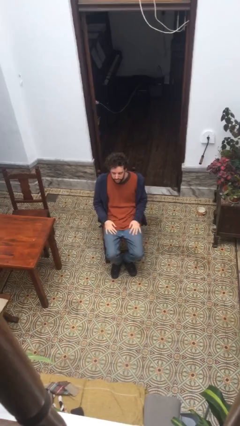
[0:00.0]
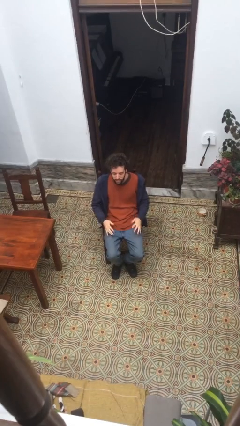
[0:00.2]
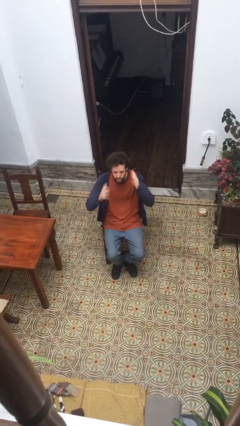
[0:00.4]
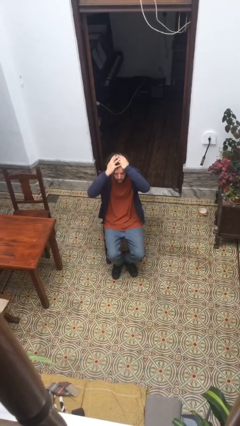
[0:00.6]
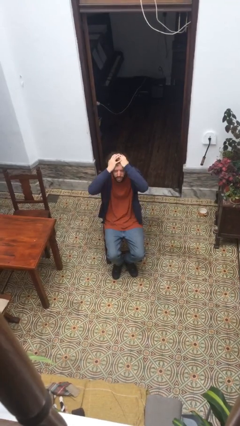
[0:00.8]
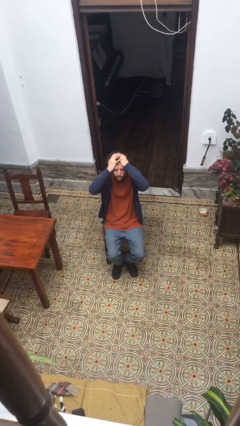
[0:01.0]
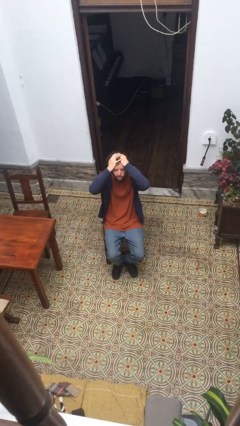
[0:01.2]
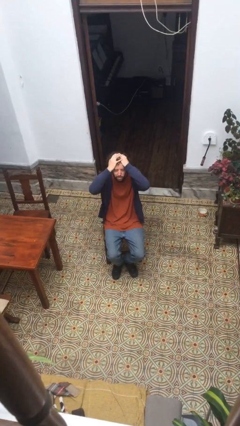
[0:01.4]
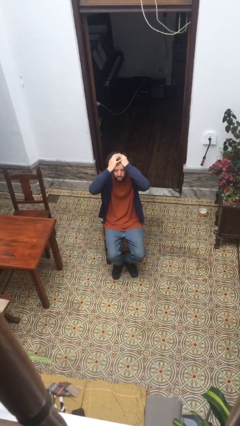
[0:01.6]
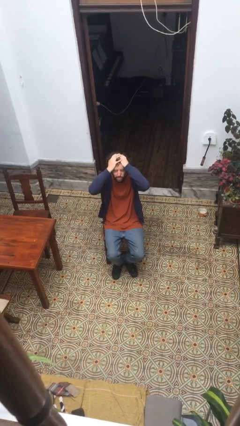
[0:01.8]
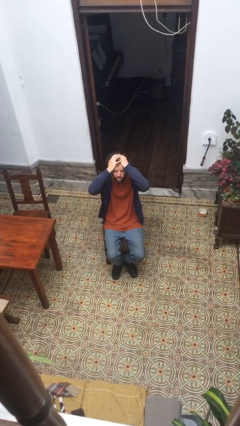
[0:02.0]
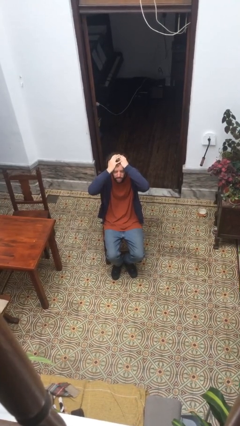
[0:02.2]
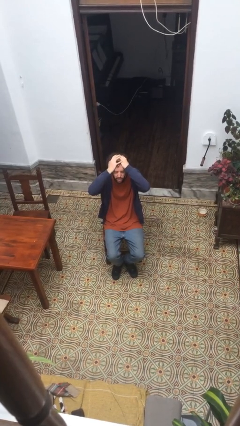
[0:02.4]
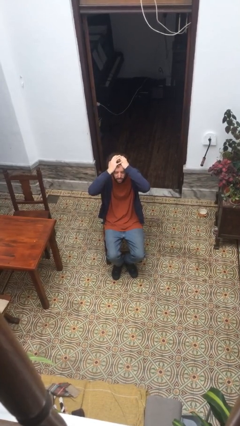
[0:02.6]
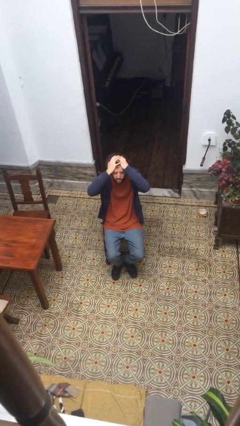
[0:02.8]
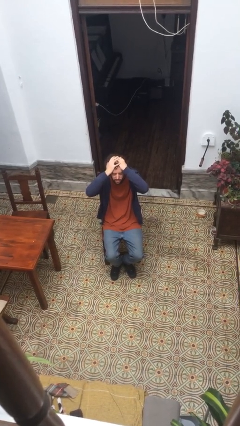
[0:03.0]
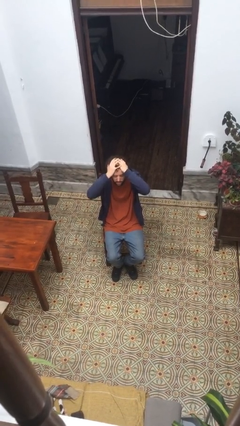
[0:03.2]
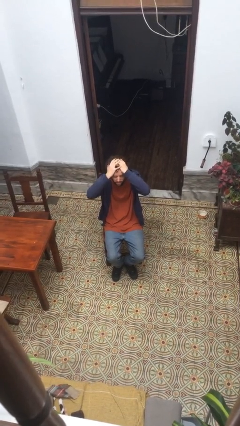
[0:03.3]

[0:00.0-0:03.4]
person covers face with hands

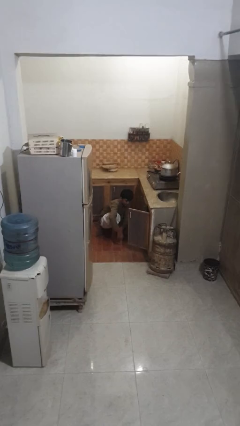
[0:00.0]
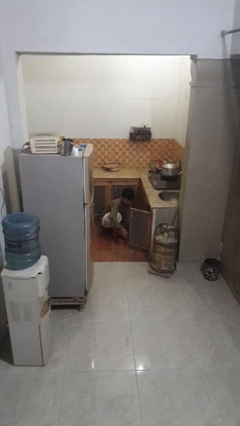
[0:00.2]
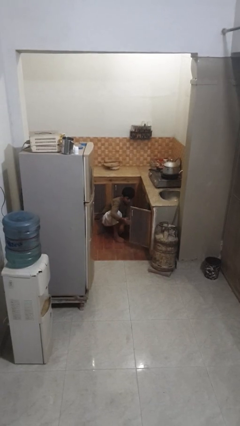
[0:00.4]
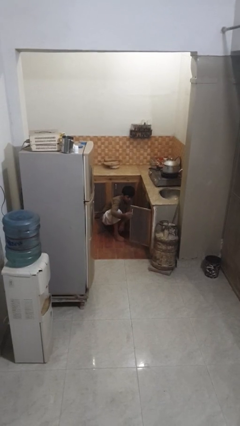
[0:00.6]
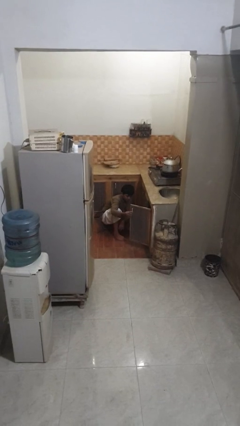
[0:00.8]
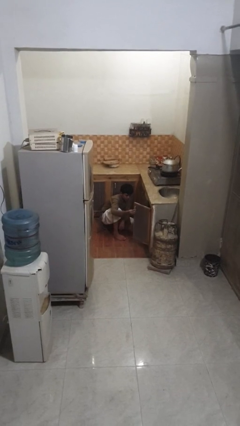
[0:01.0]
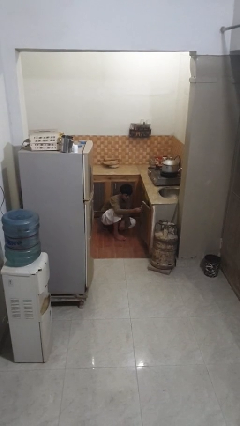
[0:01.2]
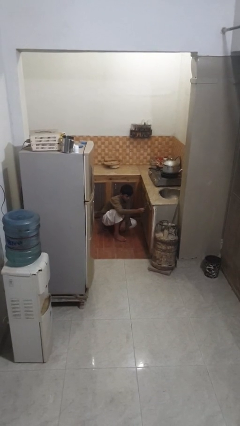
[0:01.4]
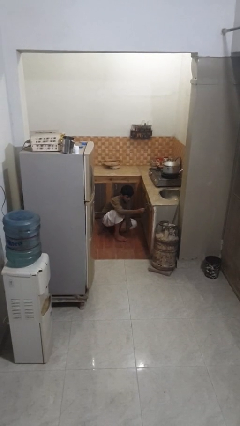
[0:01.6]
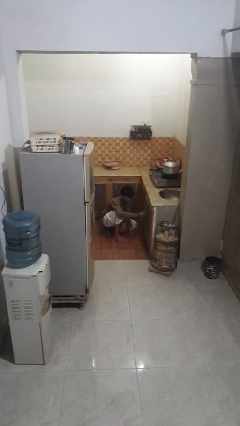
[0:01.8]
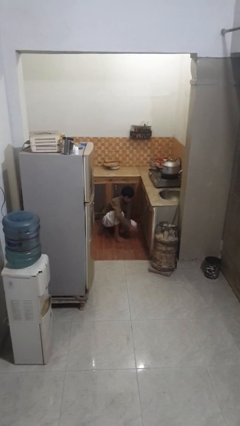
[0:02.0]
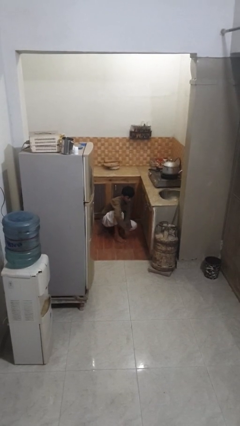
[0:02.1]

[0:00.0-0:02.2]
person closes kitchen drawer

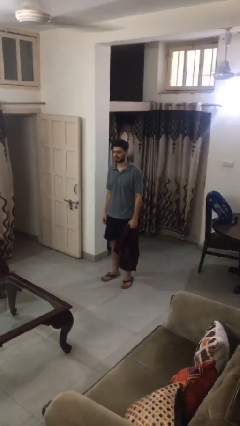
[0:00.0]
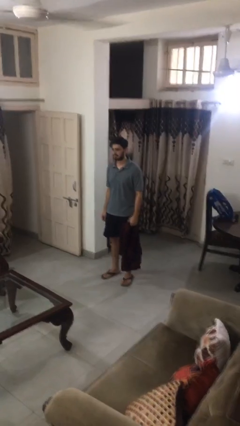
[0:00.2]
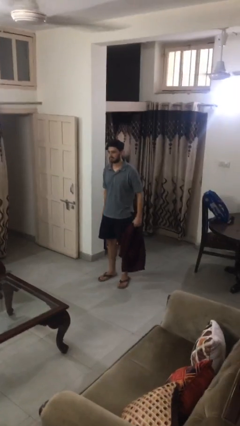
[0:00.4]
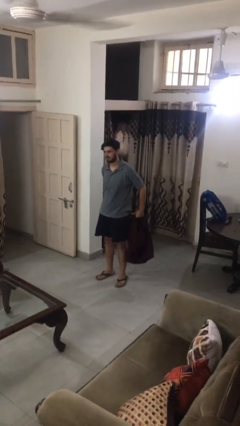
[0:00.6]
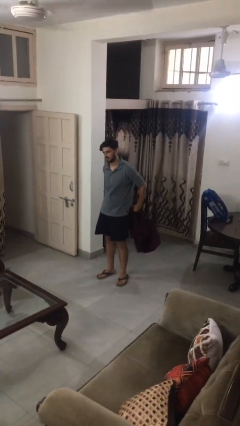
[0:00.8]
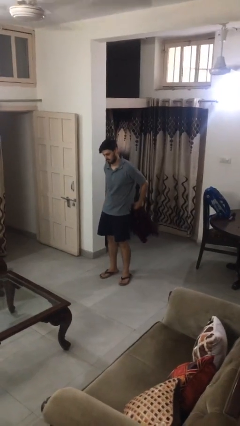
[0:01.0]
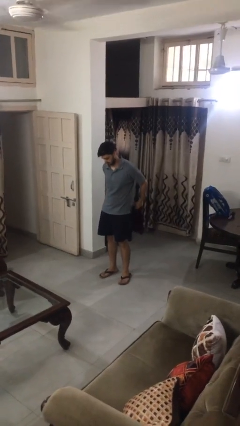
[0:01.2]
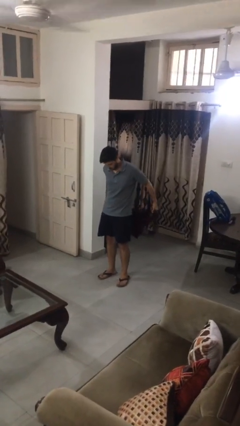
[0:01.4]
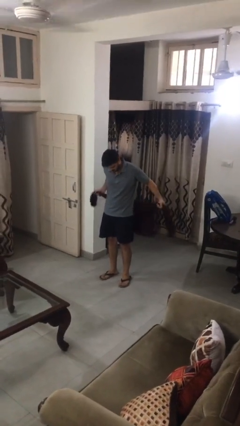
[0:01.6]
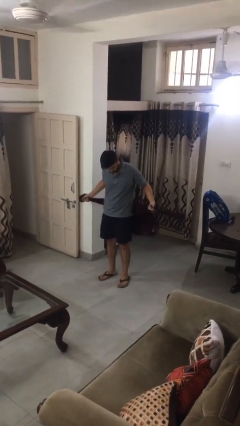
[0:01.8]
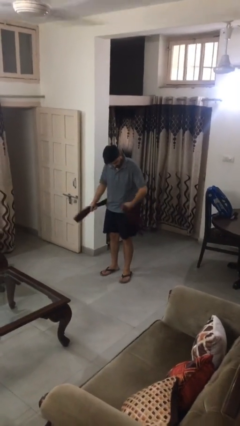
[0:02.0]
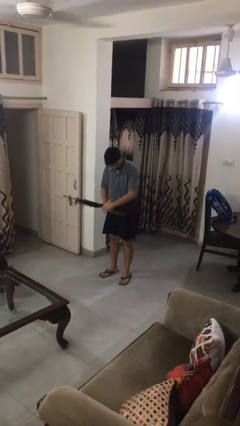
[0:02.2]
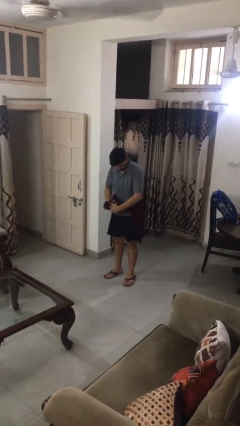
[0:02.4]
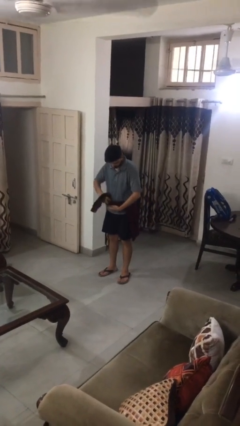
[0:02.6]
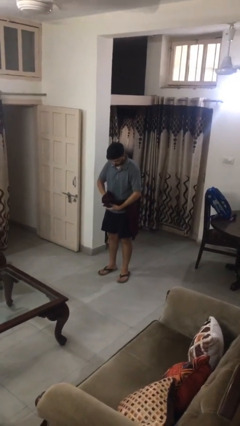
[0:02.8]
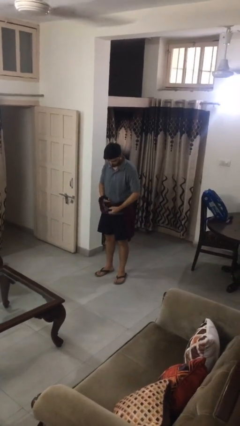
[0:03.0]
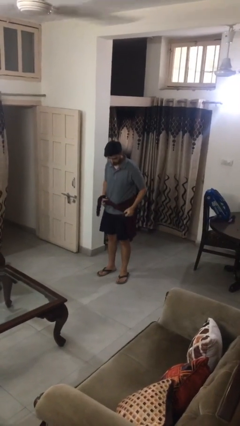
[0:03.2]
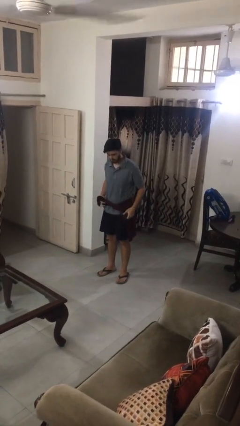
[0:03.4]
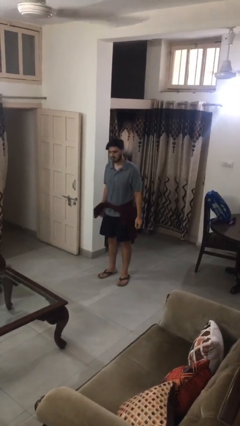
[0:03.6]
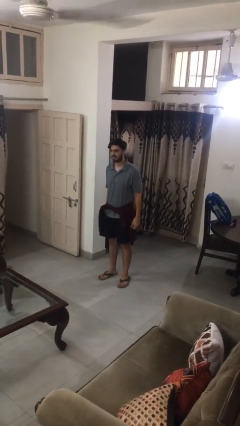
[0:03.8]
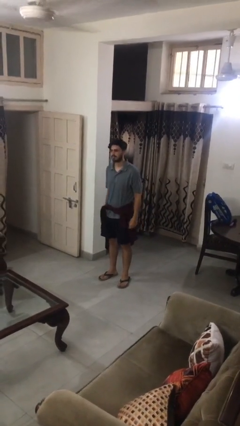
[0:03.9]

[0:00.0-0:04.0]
person ties jacket around waist

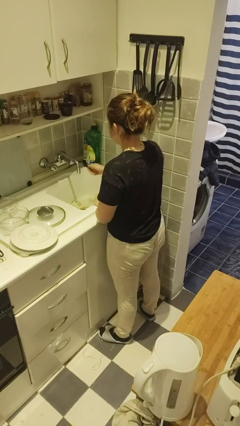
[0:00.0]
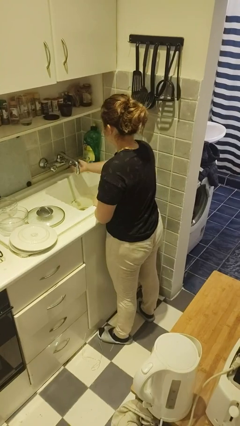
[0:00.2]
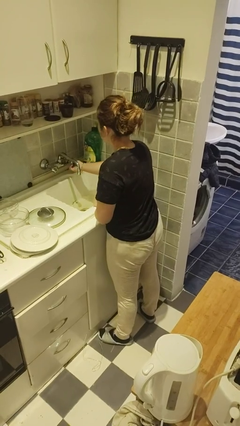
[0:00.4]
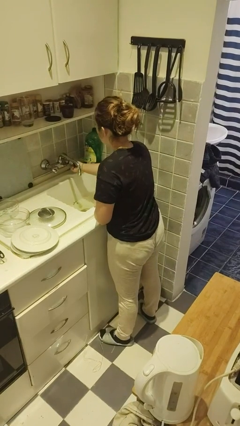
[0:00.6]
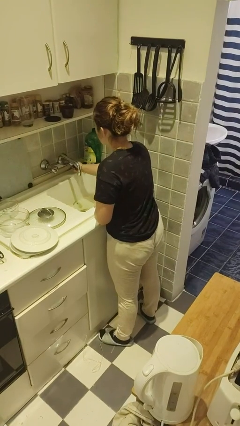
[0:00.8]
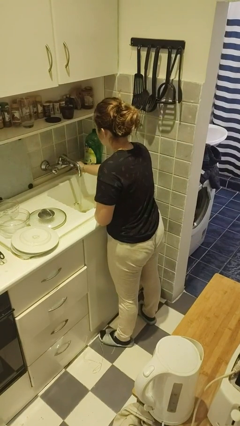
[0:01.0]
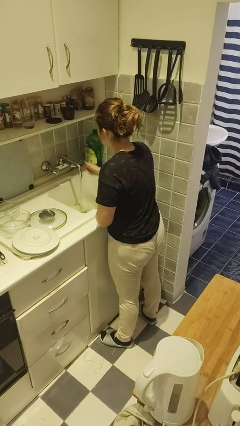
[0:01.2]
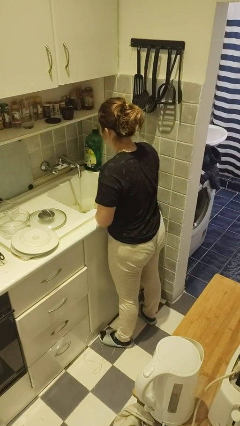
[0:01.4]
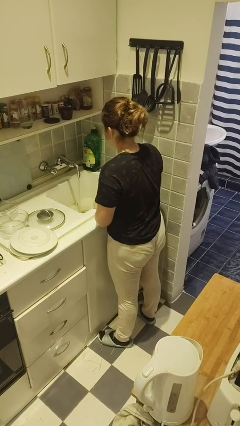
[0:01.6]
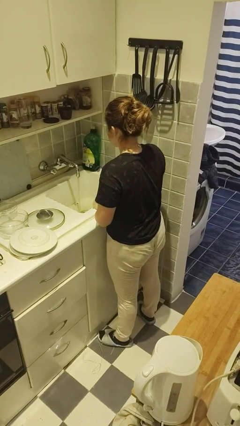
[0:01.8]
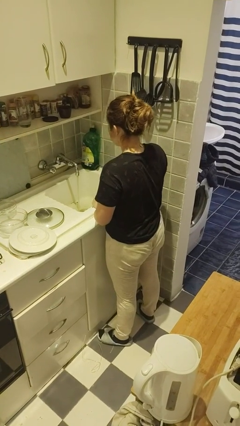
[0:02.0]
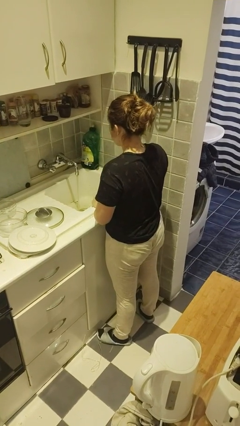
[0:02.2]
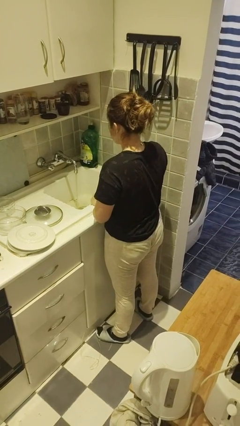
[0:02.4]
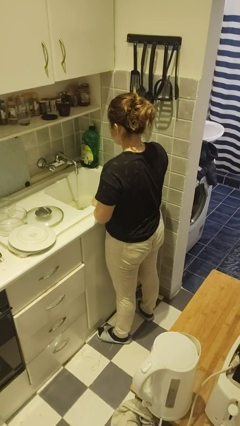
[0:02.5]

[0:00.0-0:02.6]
person turns on faucet

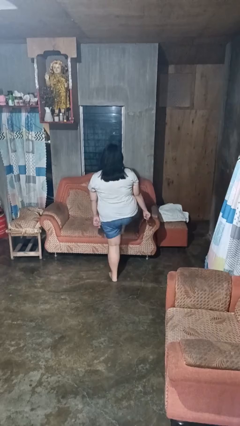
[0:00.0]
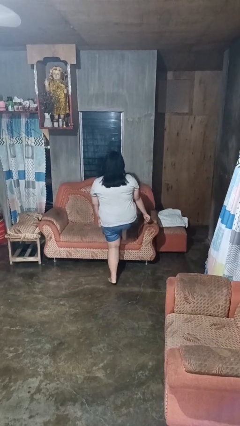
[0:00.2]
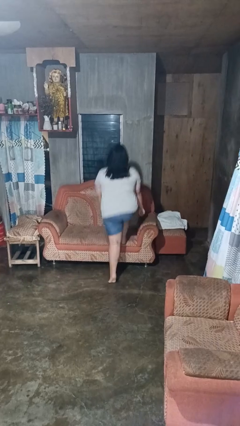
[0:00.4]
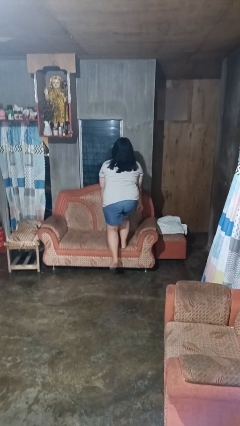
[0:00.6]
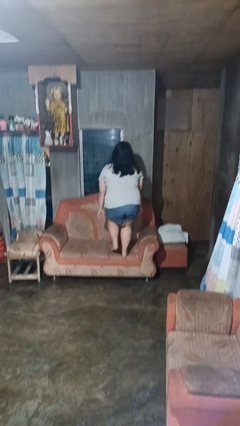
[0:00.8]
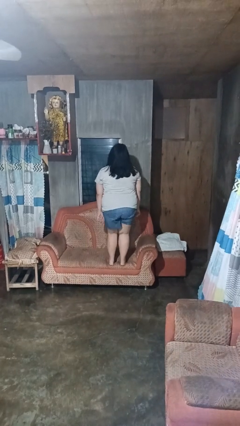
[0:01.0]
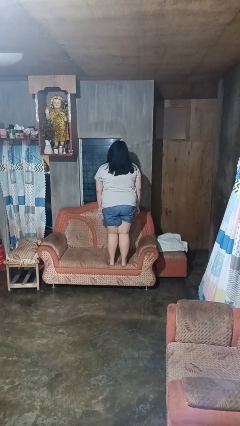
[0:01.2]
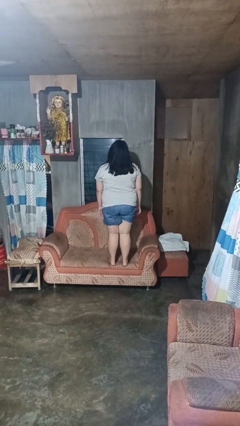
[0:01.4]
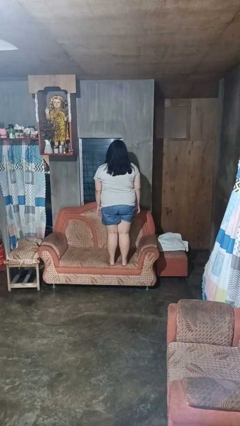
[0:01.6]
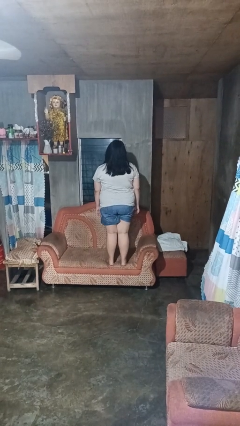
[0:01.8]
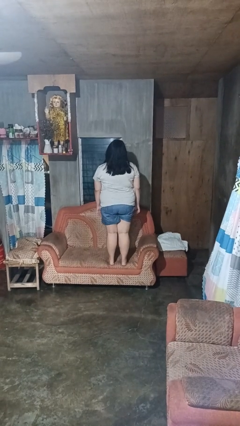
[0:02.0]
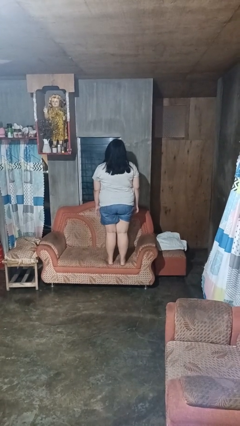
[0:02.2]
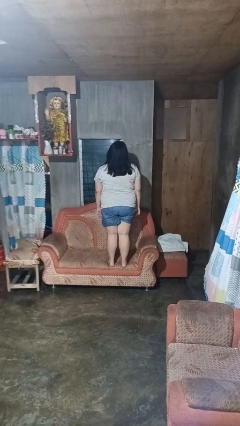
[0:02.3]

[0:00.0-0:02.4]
person climbs on couch

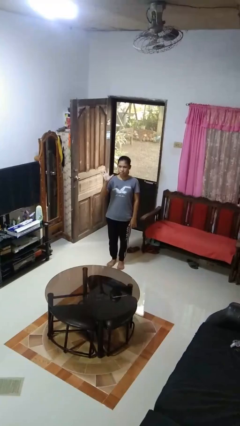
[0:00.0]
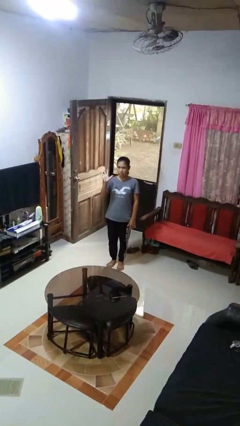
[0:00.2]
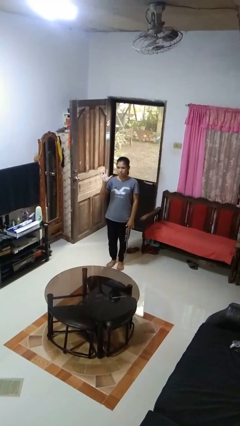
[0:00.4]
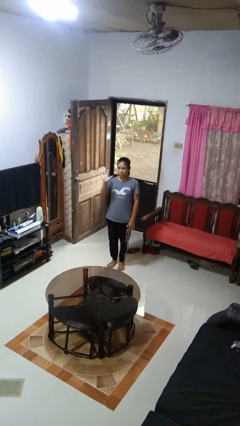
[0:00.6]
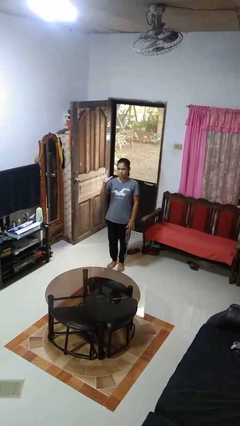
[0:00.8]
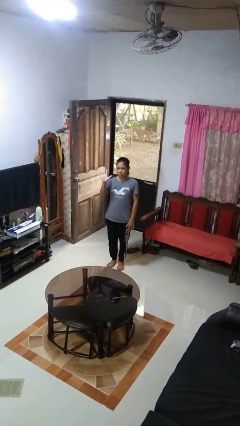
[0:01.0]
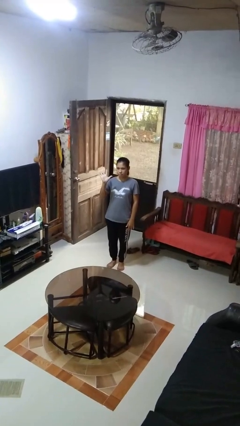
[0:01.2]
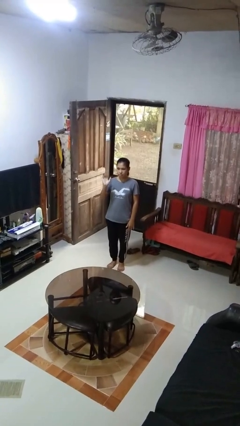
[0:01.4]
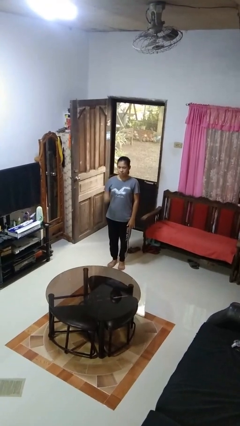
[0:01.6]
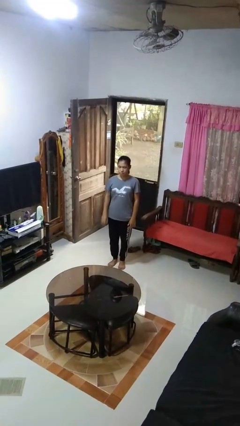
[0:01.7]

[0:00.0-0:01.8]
person gestures number five

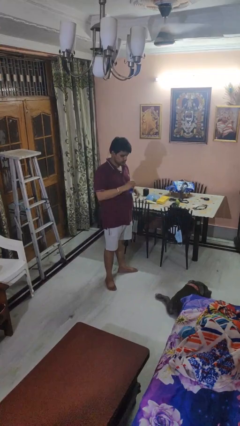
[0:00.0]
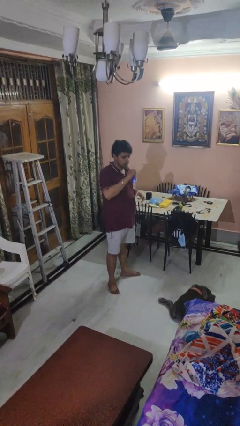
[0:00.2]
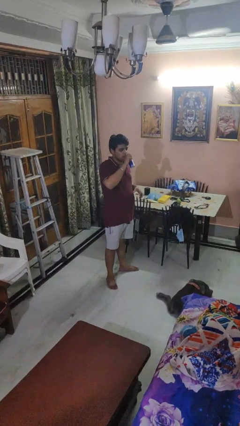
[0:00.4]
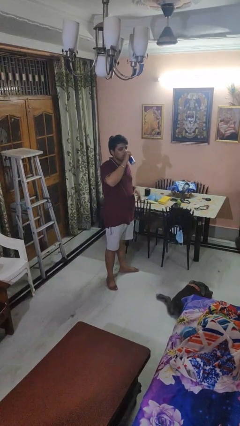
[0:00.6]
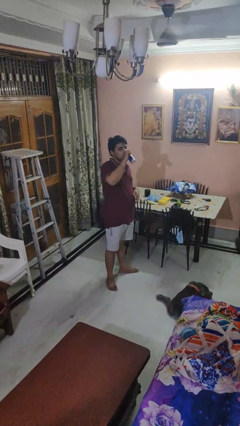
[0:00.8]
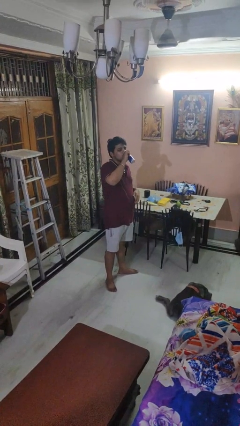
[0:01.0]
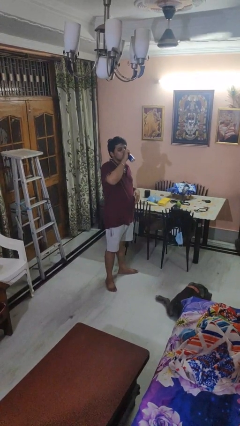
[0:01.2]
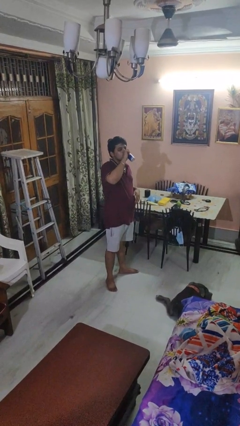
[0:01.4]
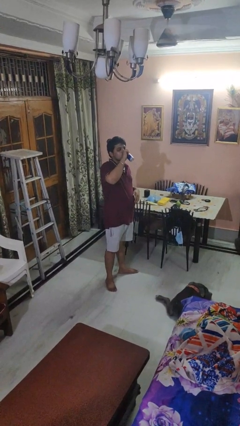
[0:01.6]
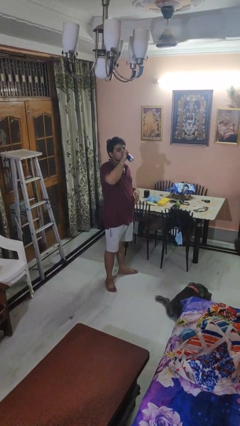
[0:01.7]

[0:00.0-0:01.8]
person drinks from beverage can
